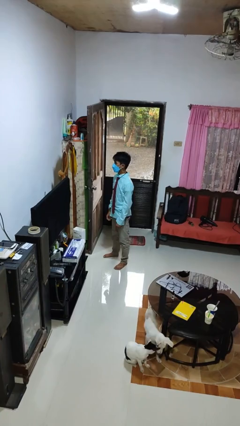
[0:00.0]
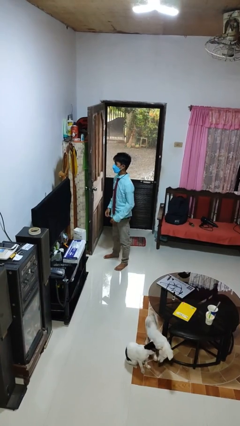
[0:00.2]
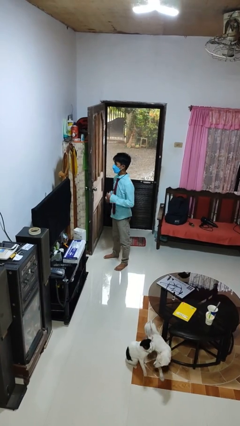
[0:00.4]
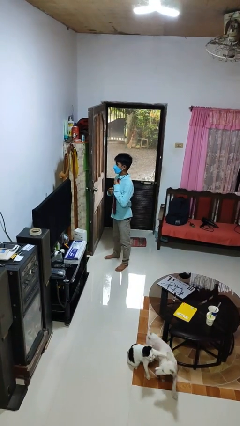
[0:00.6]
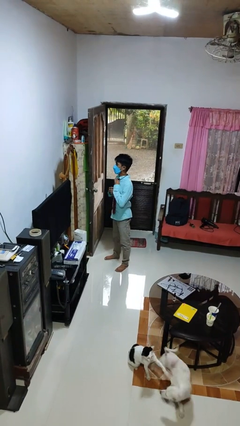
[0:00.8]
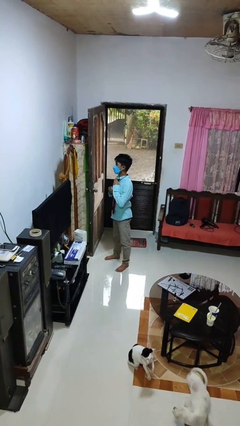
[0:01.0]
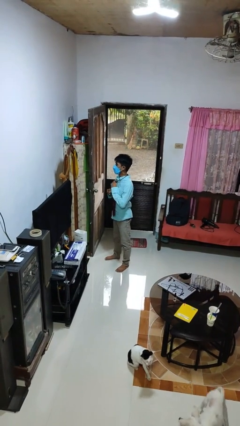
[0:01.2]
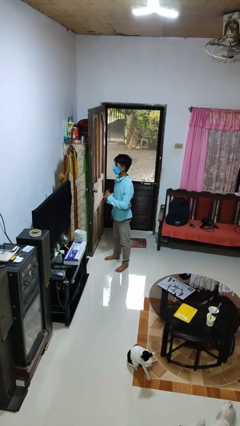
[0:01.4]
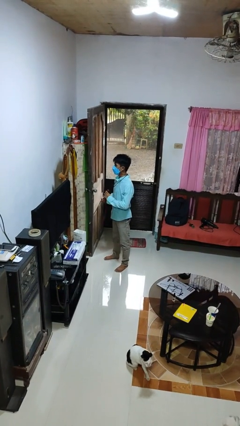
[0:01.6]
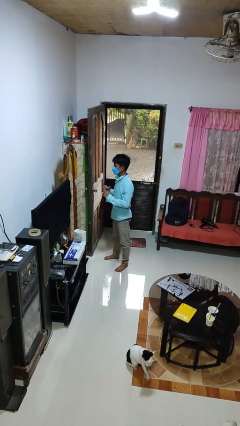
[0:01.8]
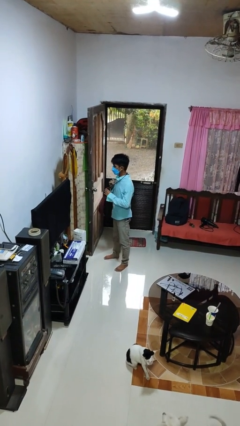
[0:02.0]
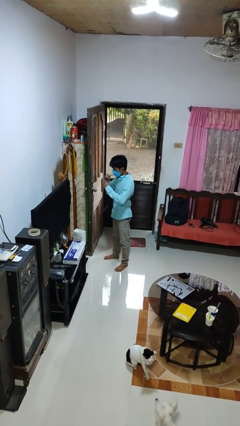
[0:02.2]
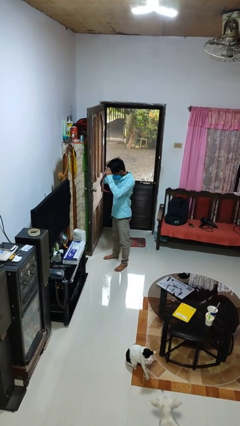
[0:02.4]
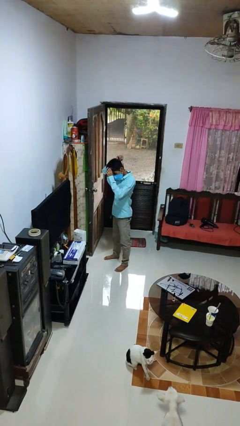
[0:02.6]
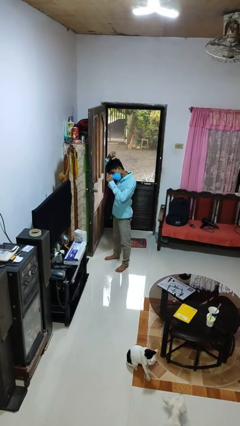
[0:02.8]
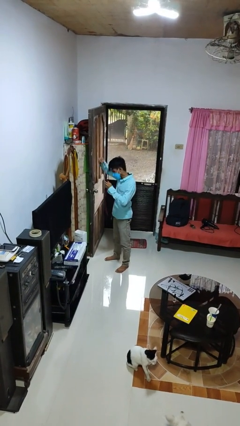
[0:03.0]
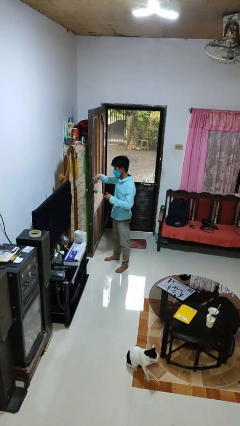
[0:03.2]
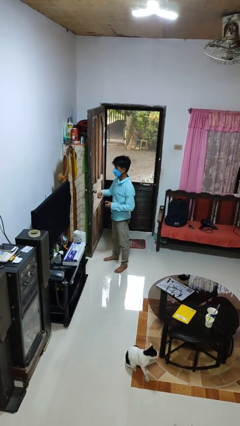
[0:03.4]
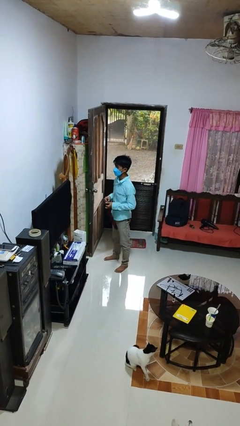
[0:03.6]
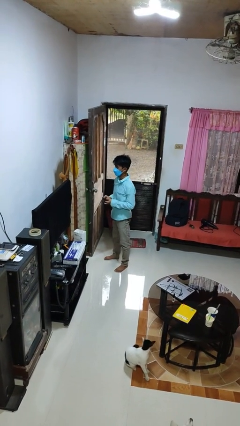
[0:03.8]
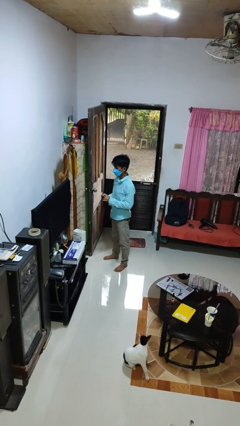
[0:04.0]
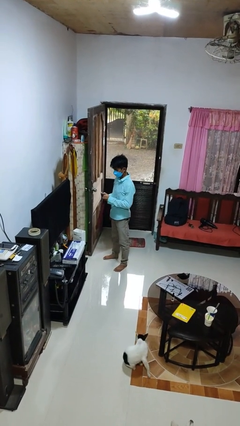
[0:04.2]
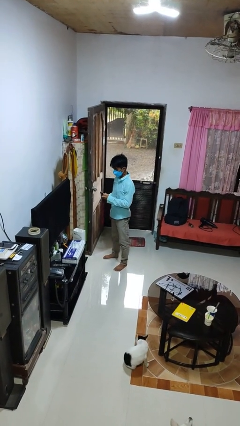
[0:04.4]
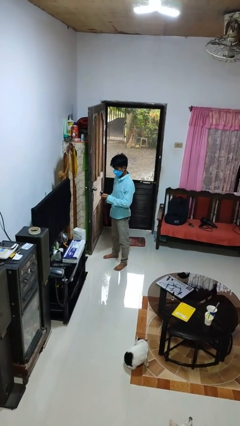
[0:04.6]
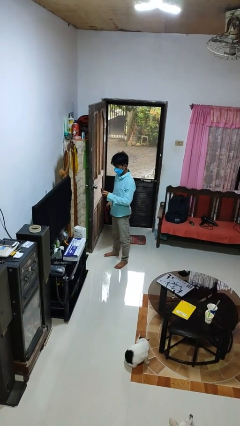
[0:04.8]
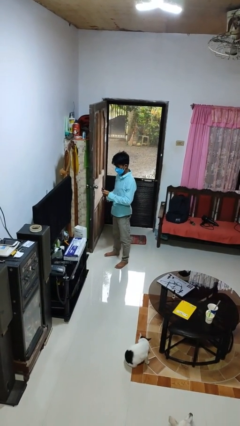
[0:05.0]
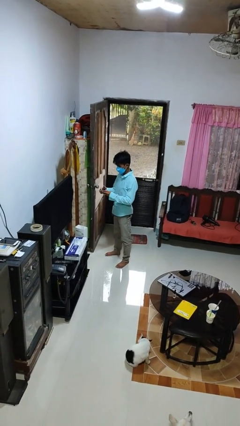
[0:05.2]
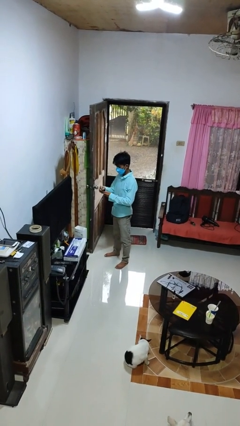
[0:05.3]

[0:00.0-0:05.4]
person takes off necktie

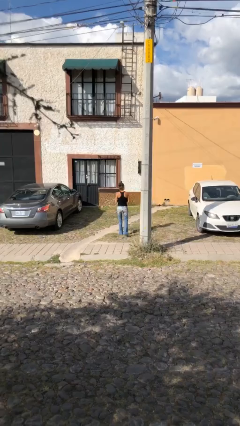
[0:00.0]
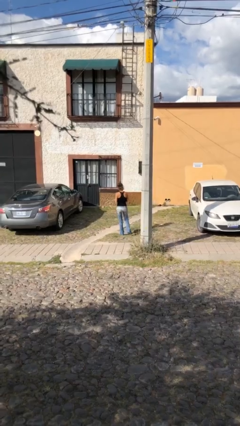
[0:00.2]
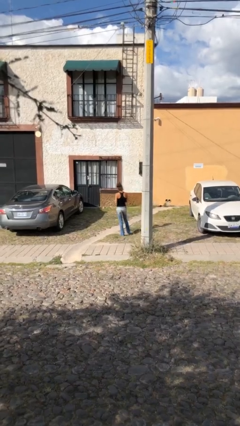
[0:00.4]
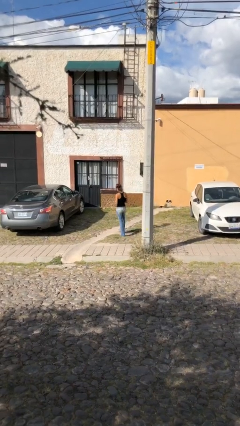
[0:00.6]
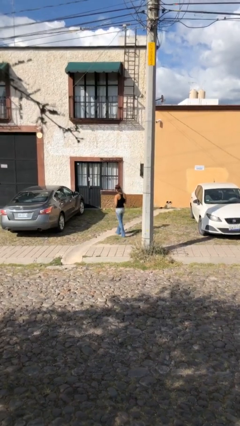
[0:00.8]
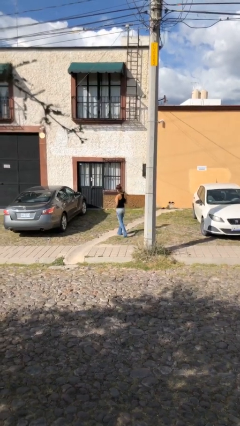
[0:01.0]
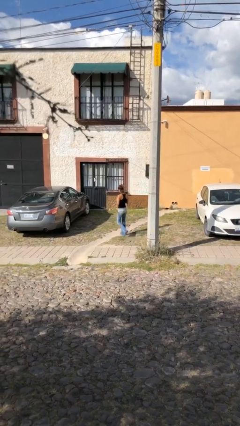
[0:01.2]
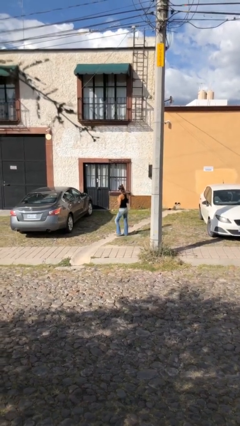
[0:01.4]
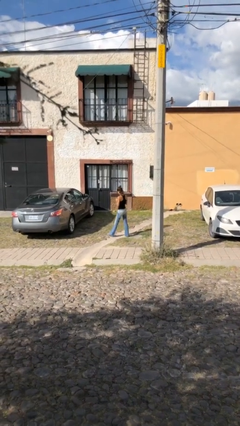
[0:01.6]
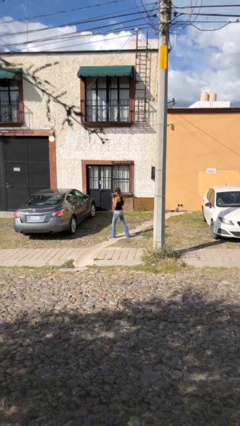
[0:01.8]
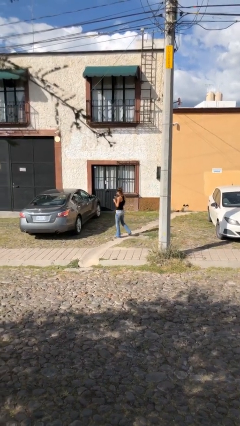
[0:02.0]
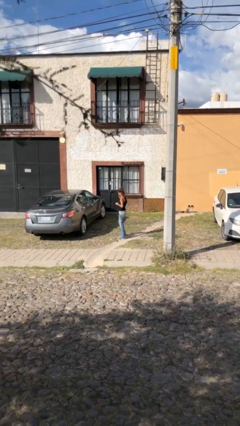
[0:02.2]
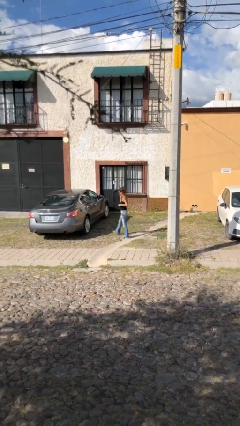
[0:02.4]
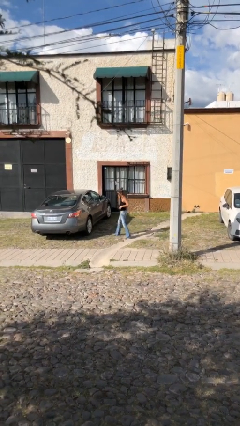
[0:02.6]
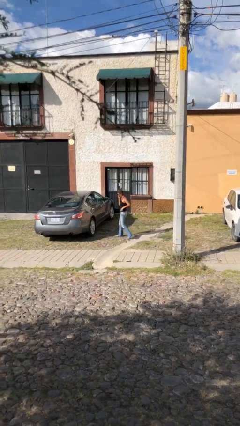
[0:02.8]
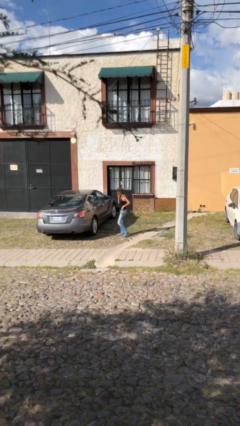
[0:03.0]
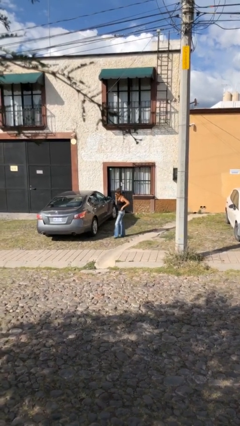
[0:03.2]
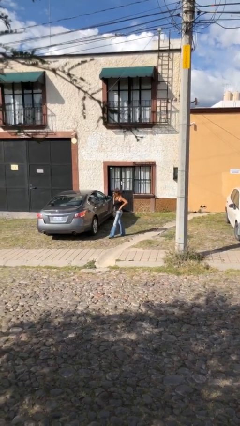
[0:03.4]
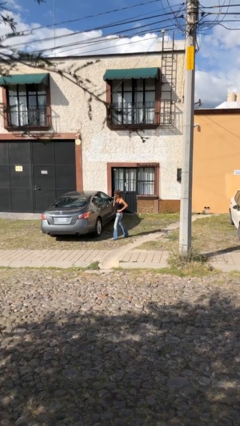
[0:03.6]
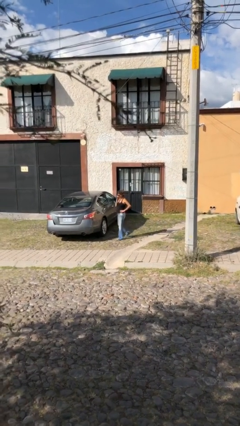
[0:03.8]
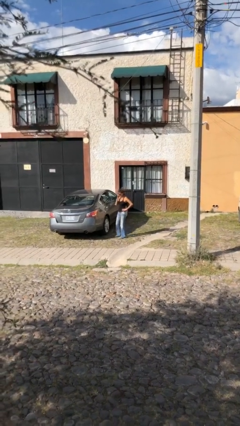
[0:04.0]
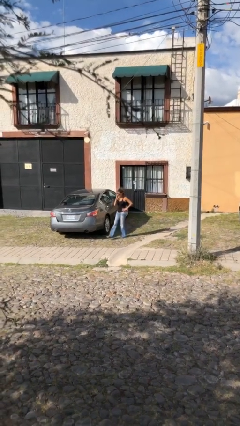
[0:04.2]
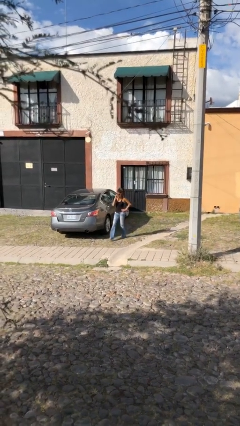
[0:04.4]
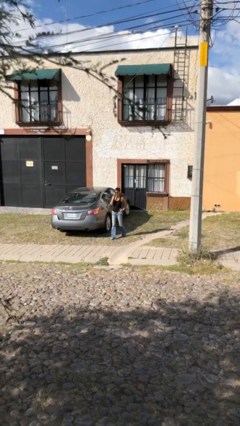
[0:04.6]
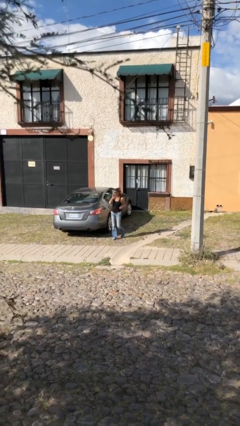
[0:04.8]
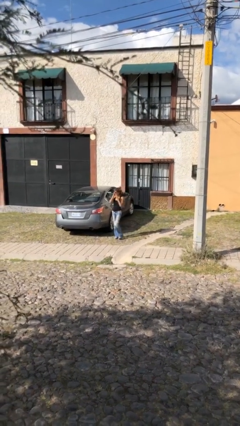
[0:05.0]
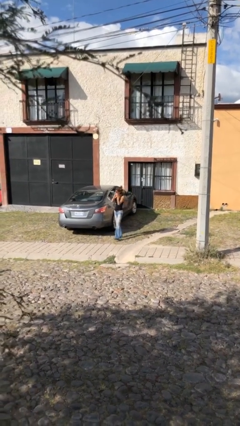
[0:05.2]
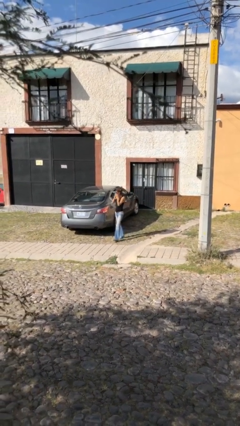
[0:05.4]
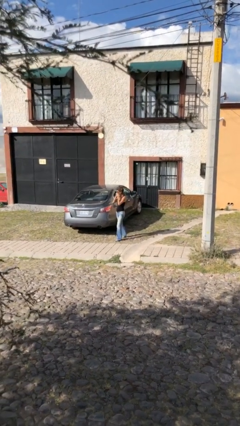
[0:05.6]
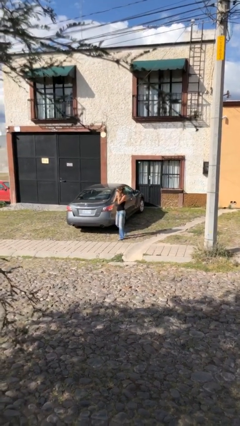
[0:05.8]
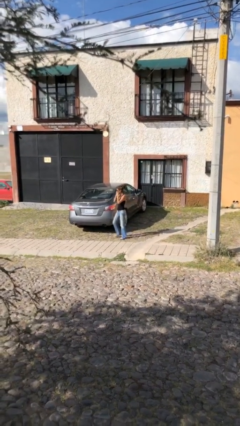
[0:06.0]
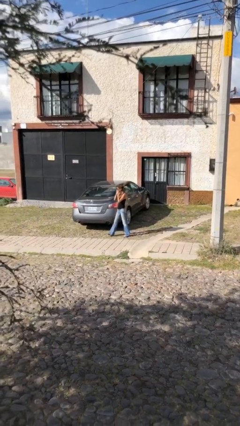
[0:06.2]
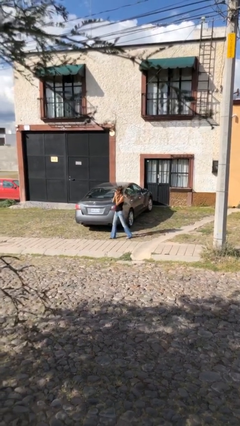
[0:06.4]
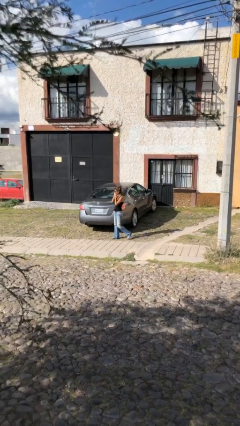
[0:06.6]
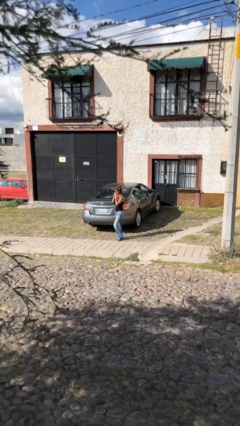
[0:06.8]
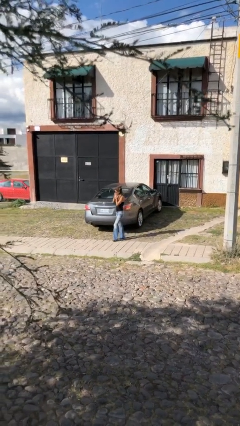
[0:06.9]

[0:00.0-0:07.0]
person talks on phone

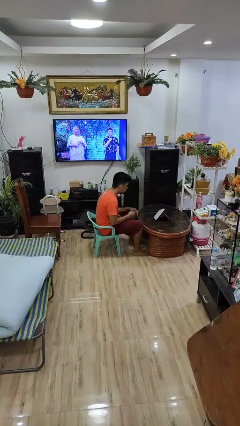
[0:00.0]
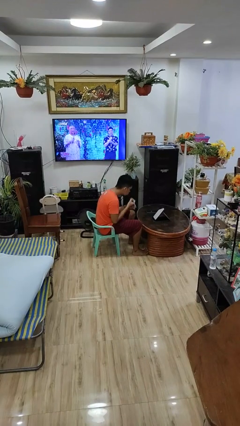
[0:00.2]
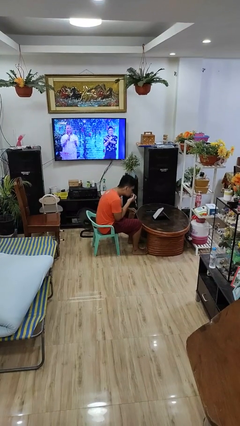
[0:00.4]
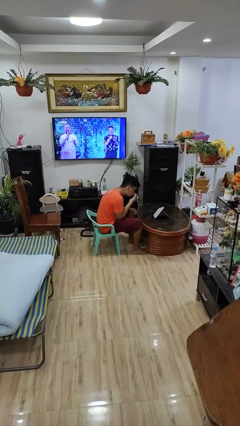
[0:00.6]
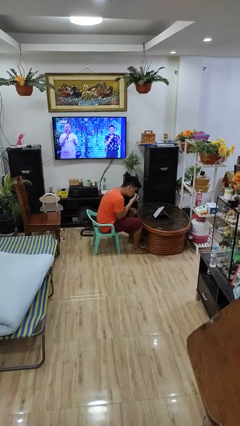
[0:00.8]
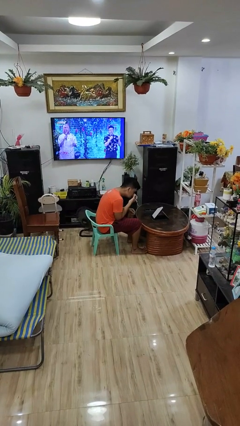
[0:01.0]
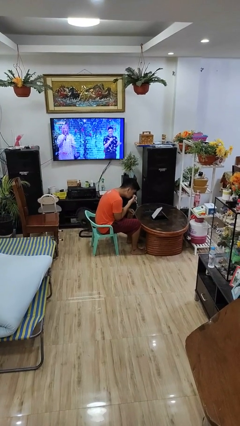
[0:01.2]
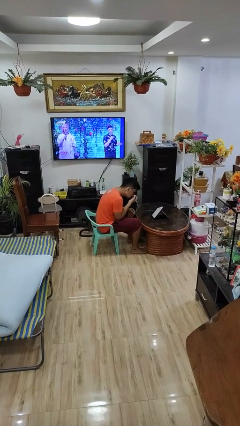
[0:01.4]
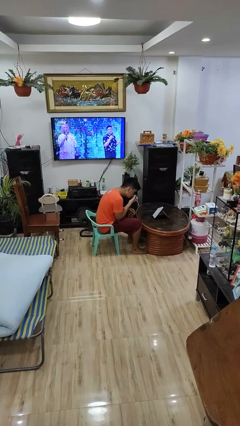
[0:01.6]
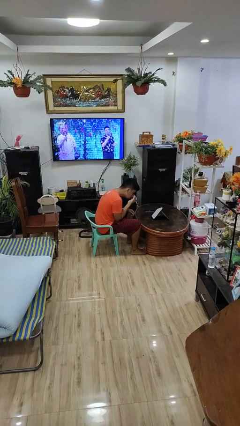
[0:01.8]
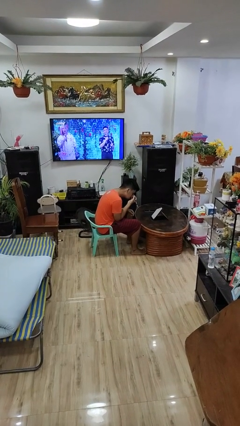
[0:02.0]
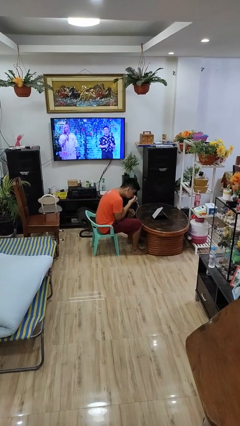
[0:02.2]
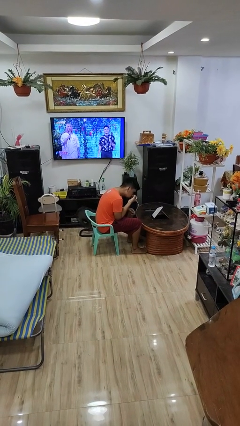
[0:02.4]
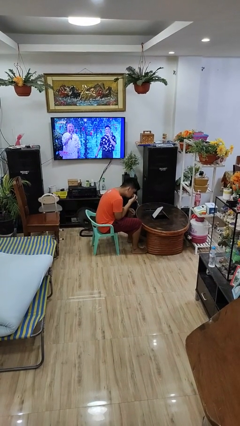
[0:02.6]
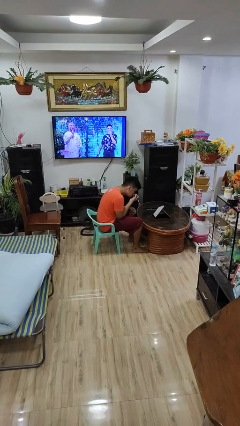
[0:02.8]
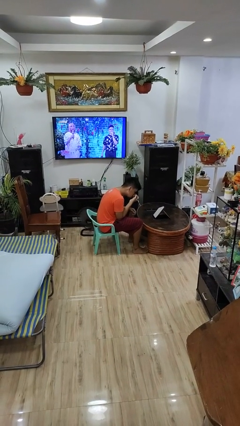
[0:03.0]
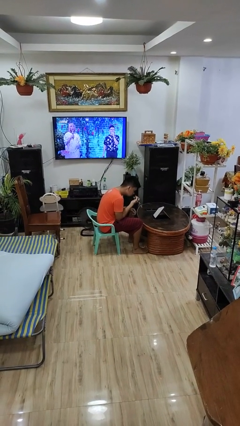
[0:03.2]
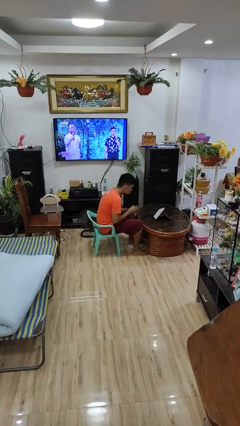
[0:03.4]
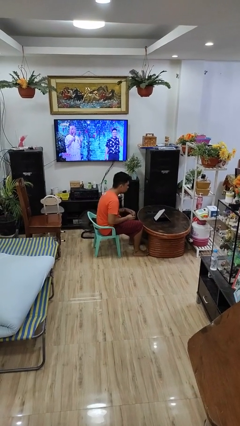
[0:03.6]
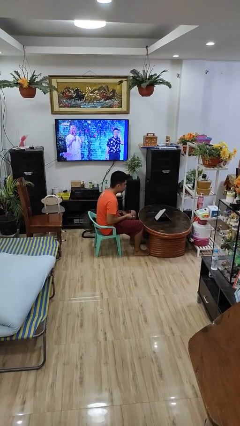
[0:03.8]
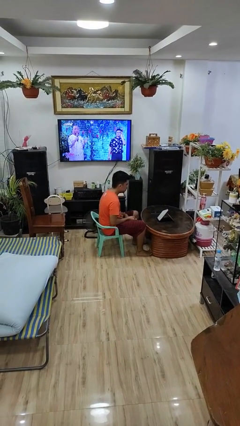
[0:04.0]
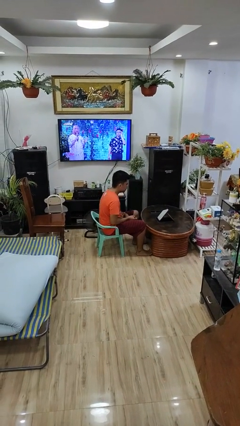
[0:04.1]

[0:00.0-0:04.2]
person applies eye makeup

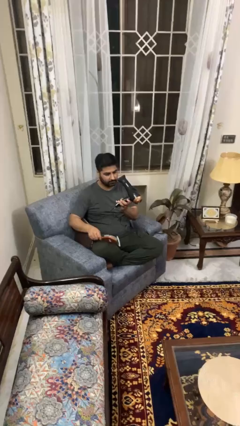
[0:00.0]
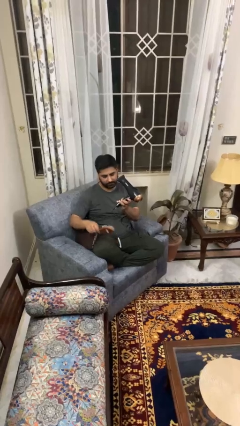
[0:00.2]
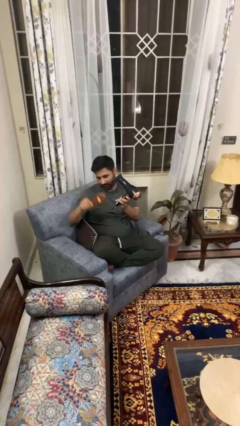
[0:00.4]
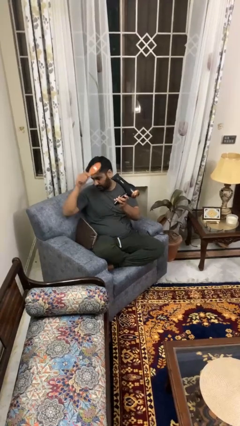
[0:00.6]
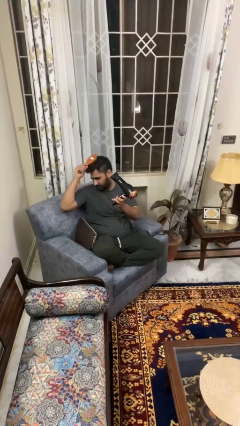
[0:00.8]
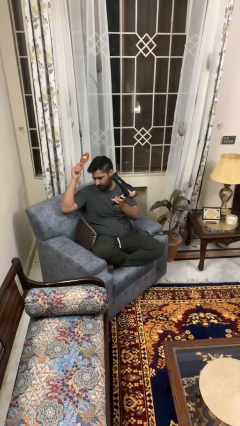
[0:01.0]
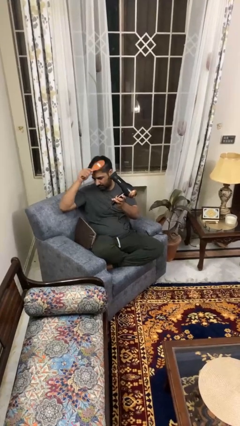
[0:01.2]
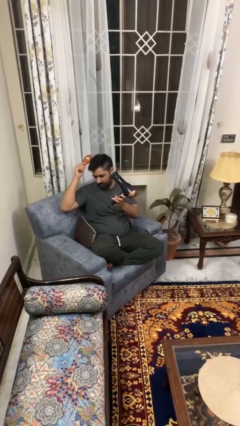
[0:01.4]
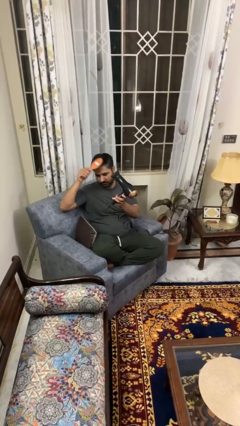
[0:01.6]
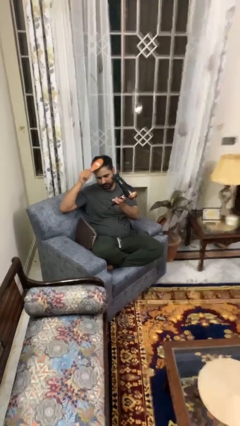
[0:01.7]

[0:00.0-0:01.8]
person dries hair with hairdryer
